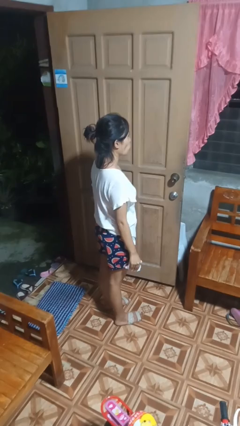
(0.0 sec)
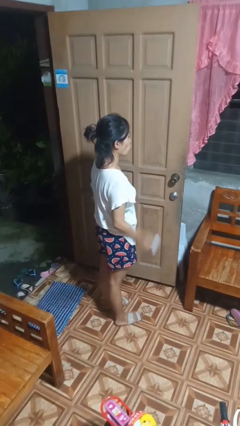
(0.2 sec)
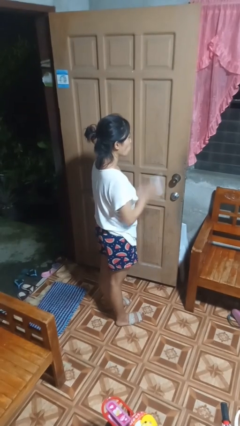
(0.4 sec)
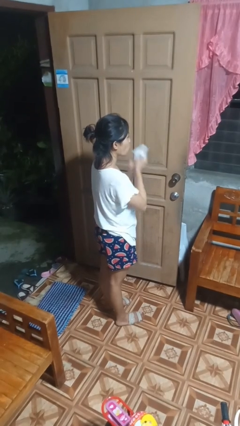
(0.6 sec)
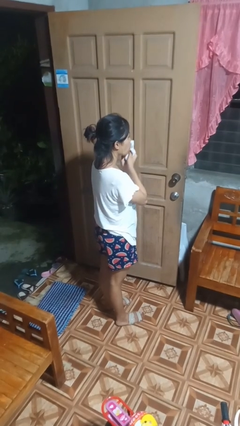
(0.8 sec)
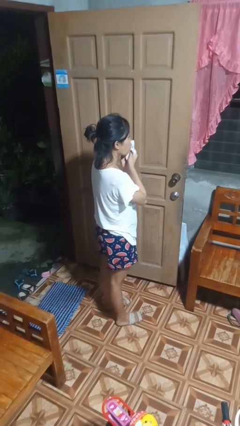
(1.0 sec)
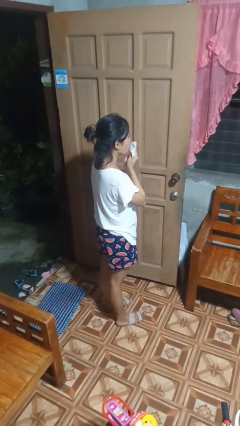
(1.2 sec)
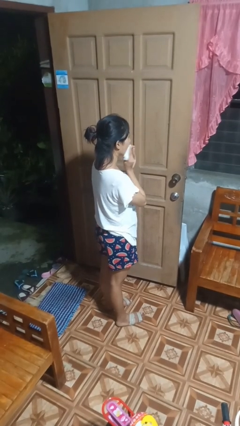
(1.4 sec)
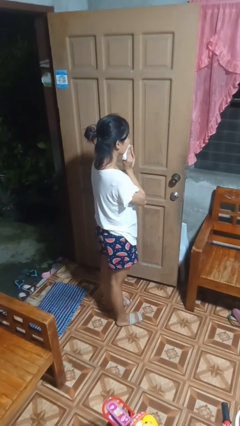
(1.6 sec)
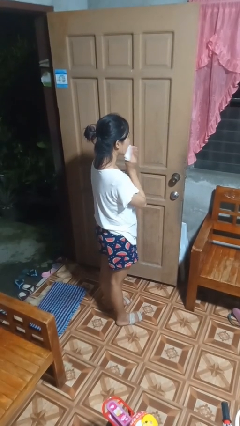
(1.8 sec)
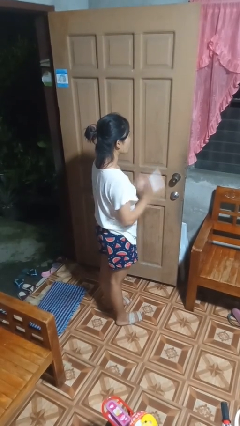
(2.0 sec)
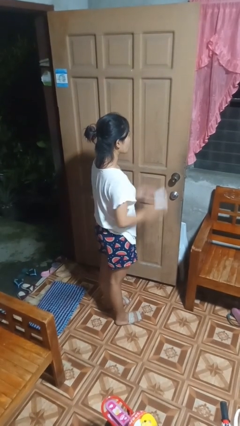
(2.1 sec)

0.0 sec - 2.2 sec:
person wipes mouth with napkin

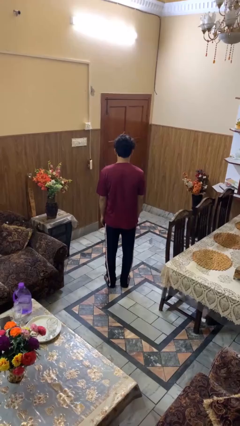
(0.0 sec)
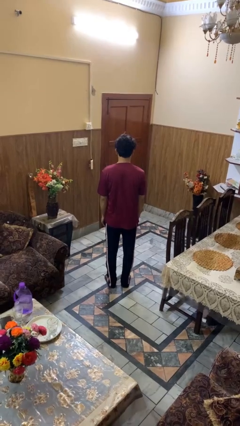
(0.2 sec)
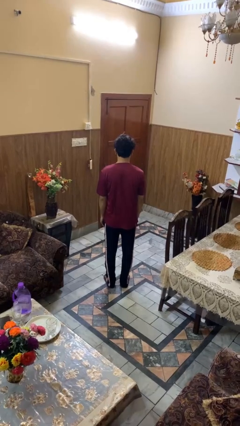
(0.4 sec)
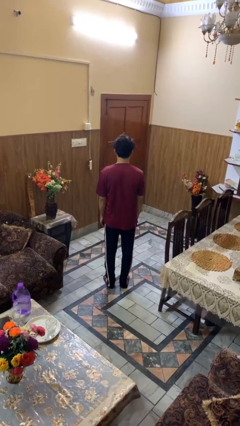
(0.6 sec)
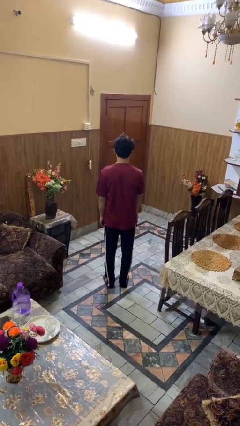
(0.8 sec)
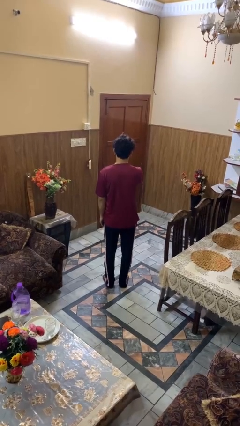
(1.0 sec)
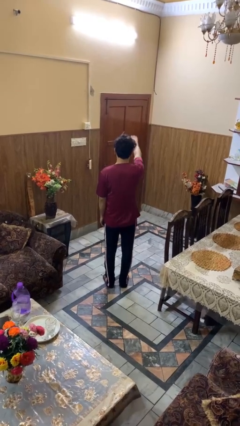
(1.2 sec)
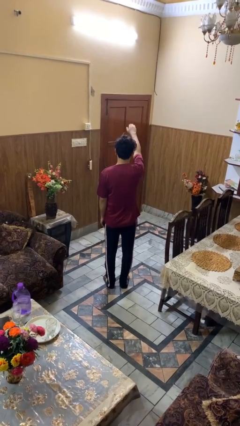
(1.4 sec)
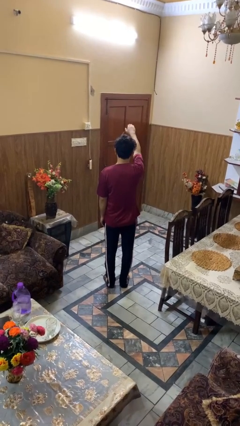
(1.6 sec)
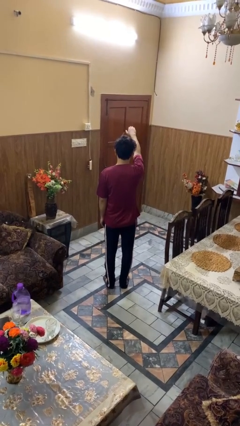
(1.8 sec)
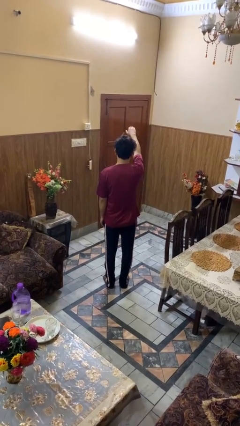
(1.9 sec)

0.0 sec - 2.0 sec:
person gestures swipe up

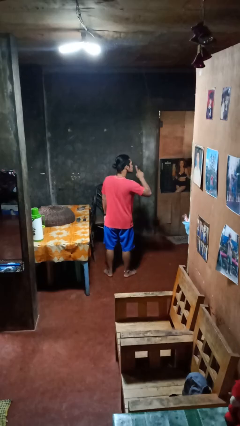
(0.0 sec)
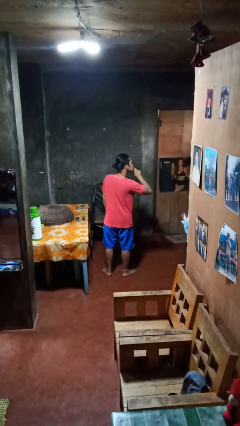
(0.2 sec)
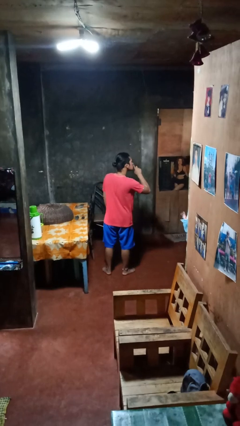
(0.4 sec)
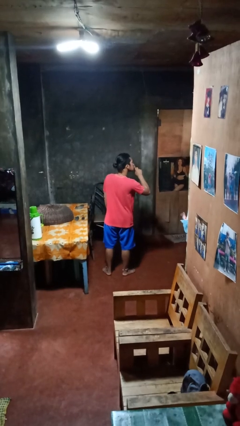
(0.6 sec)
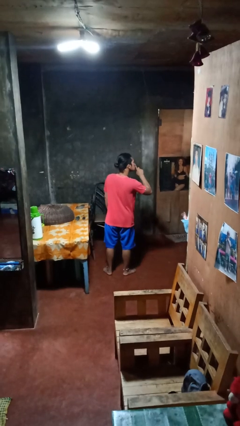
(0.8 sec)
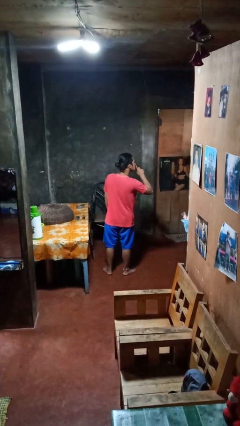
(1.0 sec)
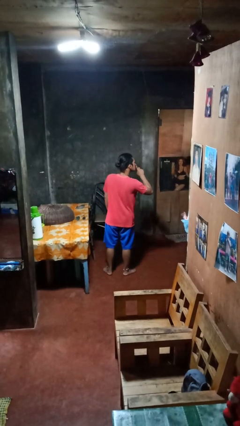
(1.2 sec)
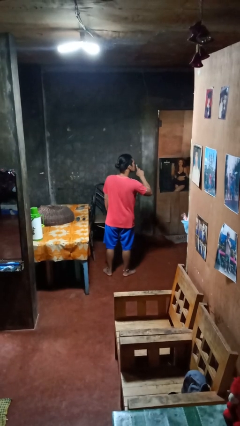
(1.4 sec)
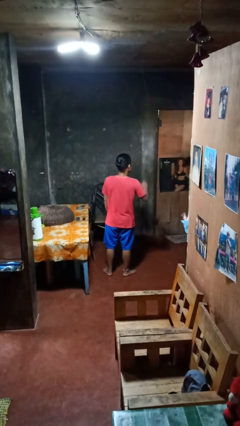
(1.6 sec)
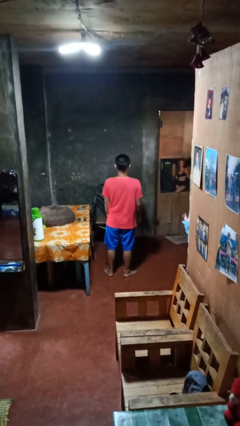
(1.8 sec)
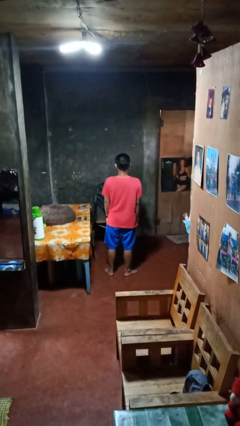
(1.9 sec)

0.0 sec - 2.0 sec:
person gestures be quiet

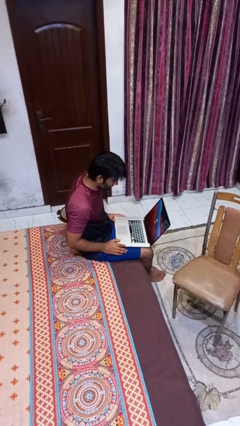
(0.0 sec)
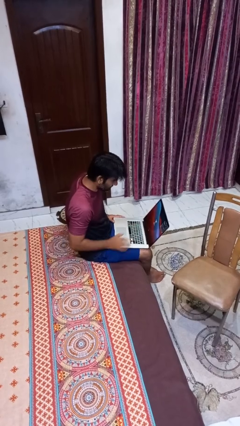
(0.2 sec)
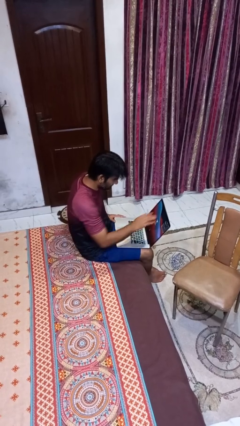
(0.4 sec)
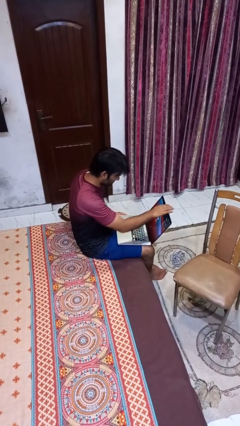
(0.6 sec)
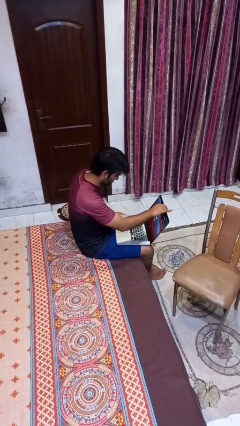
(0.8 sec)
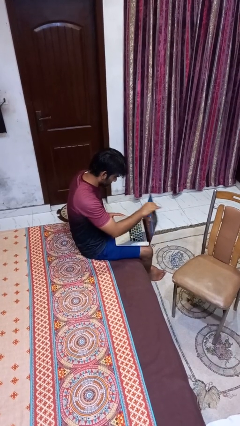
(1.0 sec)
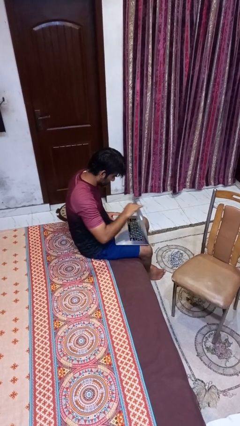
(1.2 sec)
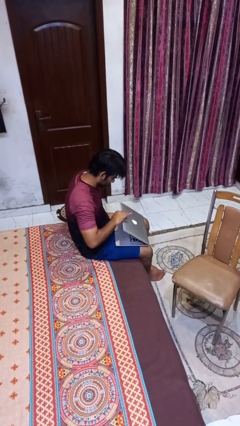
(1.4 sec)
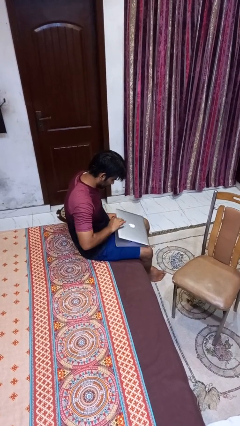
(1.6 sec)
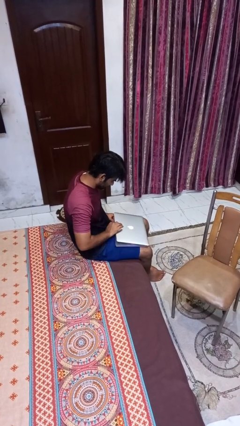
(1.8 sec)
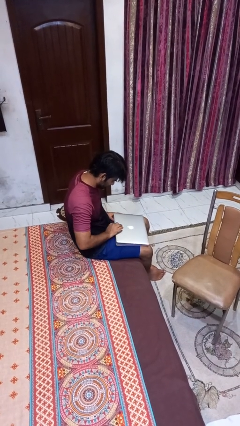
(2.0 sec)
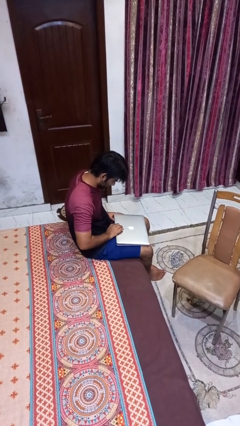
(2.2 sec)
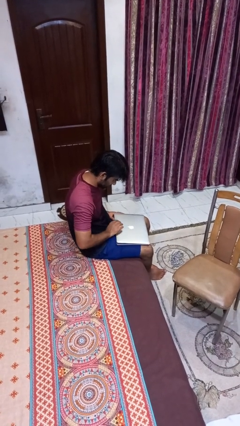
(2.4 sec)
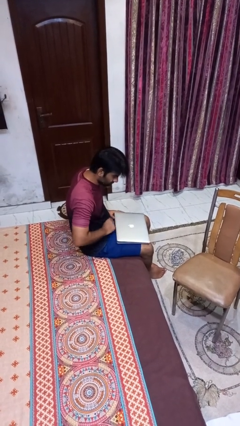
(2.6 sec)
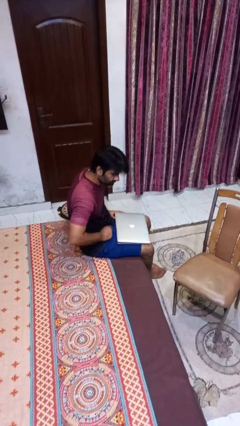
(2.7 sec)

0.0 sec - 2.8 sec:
person closes laptop

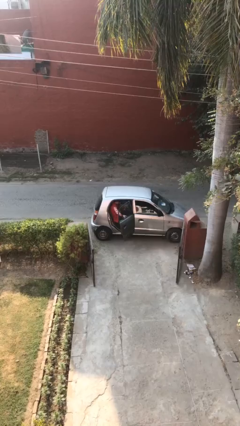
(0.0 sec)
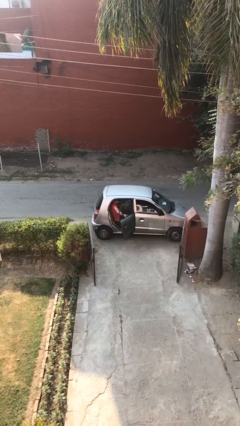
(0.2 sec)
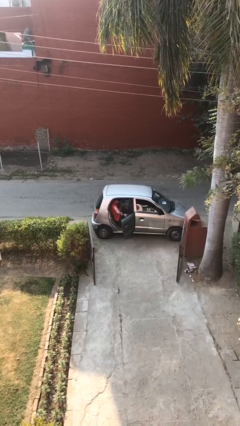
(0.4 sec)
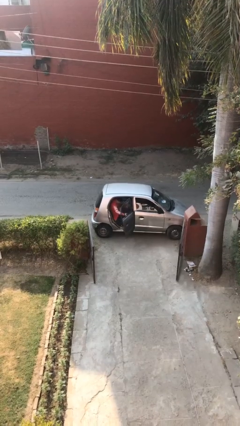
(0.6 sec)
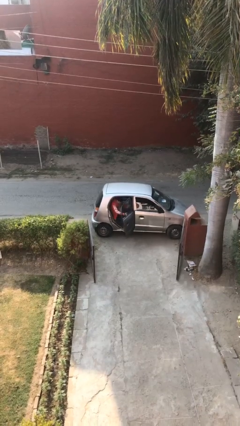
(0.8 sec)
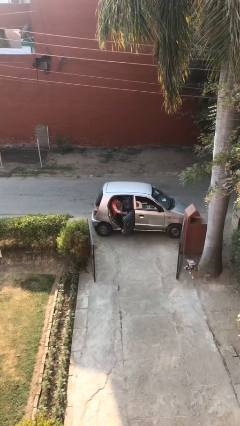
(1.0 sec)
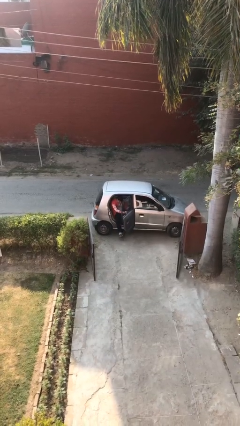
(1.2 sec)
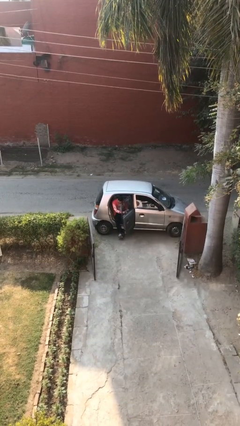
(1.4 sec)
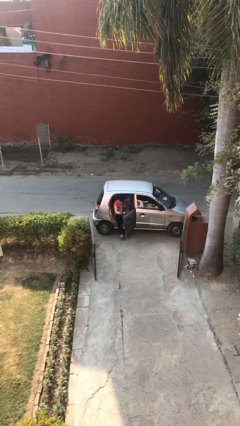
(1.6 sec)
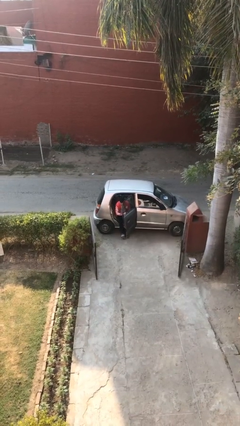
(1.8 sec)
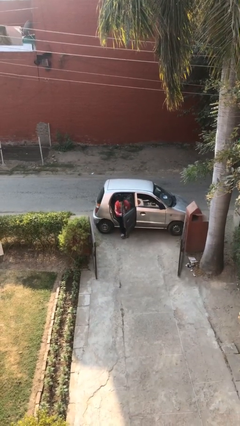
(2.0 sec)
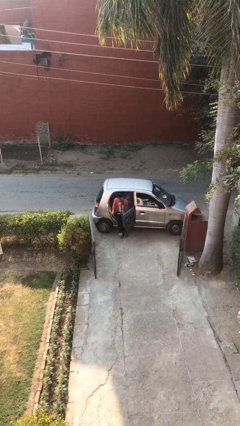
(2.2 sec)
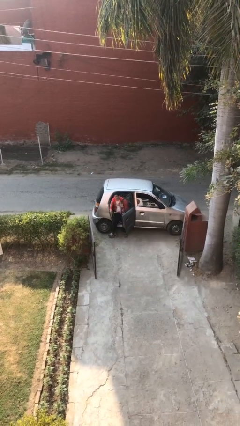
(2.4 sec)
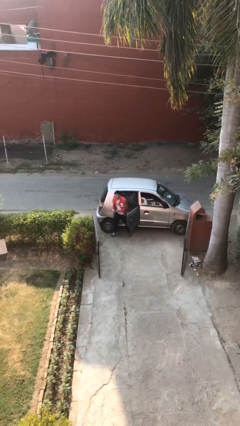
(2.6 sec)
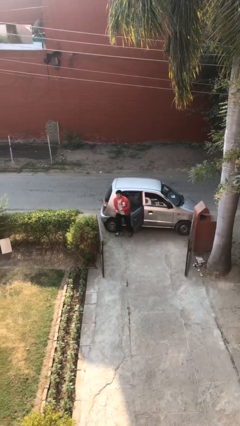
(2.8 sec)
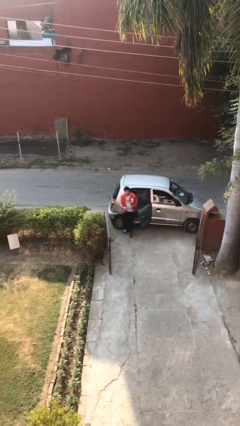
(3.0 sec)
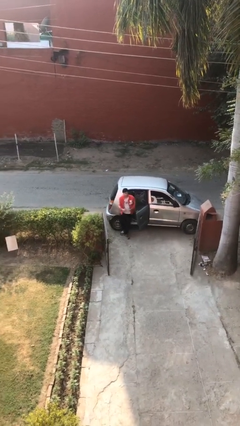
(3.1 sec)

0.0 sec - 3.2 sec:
person exits car

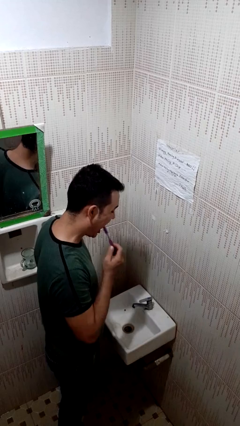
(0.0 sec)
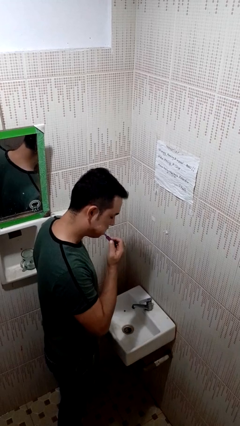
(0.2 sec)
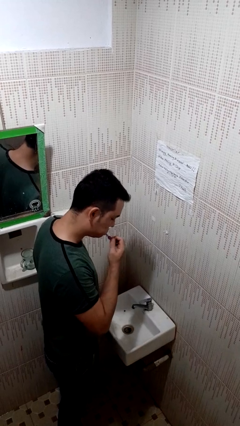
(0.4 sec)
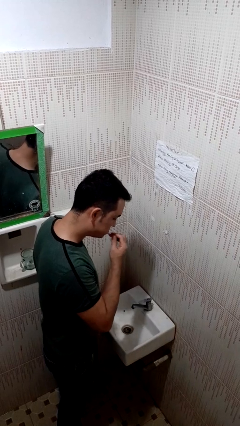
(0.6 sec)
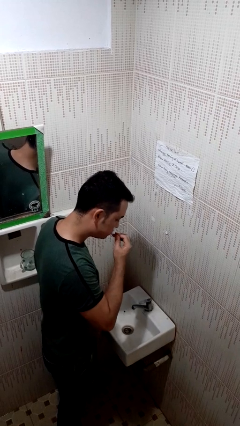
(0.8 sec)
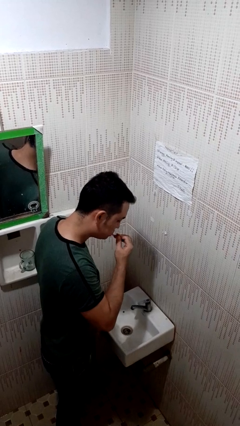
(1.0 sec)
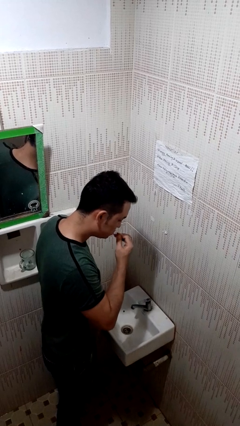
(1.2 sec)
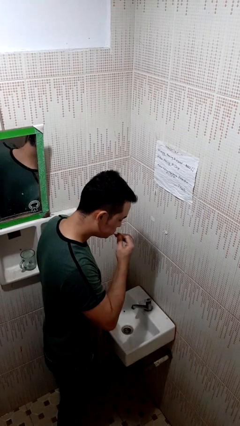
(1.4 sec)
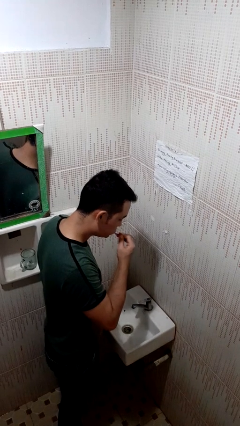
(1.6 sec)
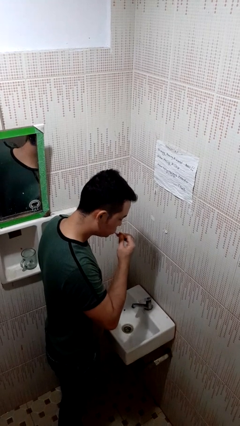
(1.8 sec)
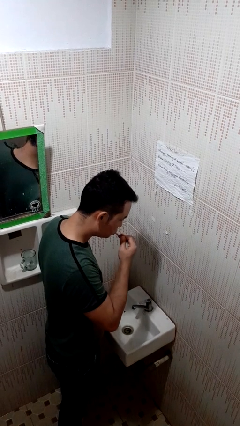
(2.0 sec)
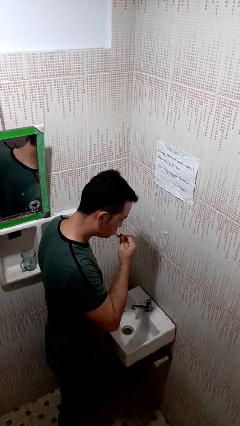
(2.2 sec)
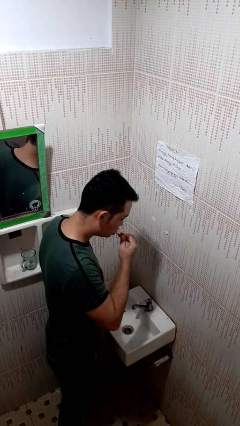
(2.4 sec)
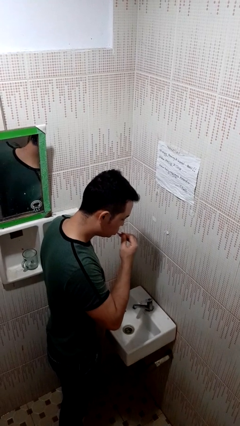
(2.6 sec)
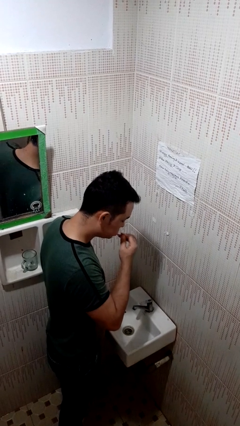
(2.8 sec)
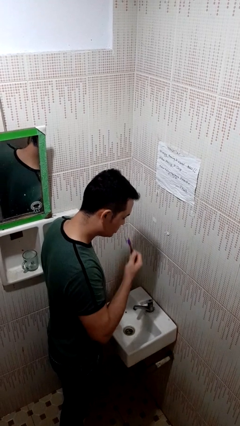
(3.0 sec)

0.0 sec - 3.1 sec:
person brushes teeth

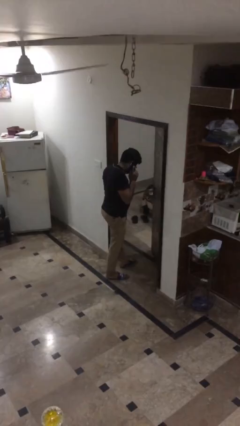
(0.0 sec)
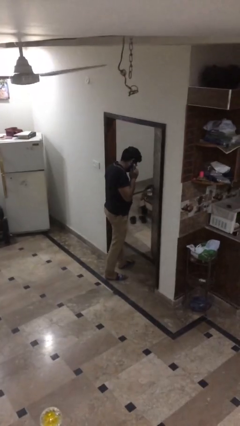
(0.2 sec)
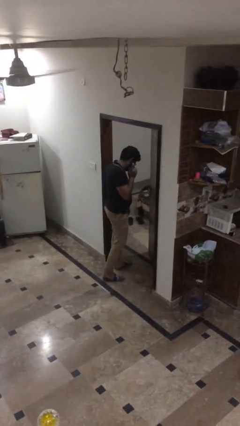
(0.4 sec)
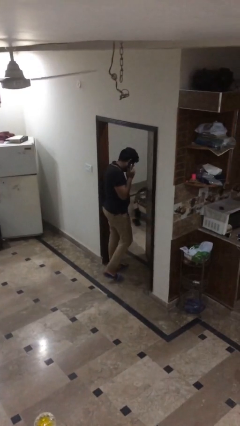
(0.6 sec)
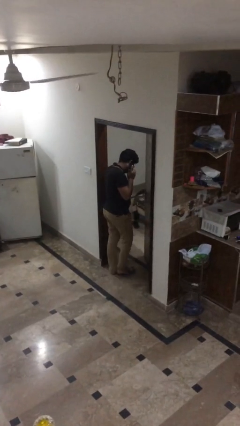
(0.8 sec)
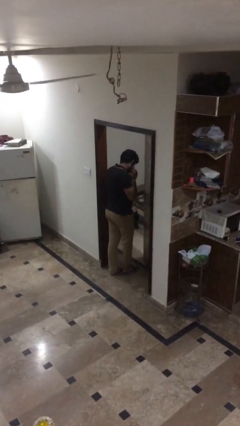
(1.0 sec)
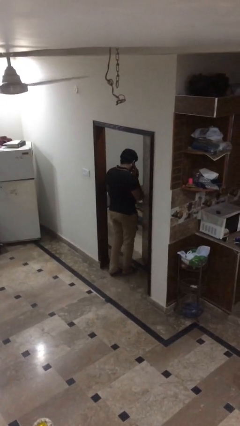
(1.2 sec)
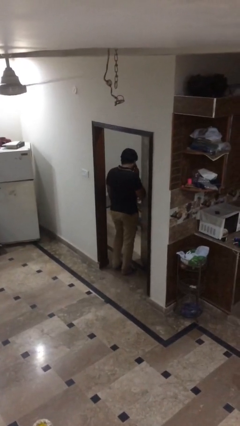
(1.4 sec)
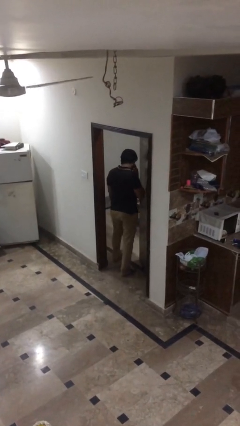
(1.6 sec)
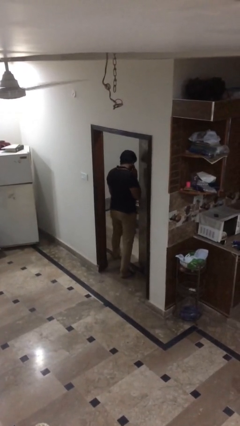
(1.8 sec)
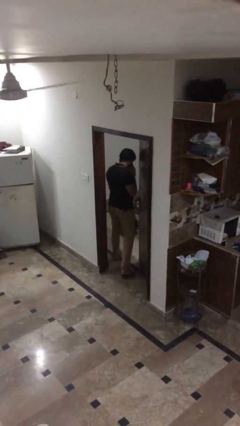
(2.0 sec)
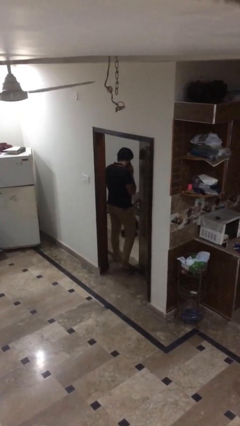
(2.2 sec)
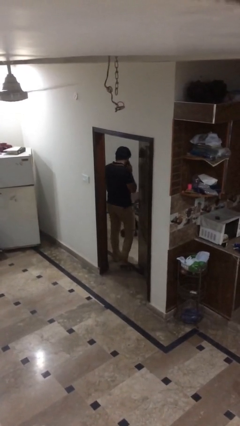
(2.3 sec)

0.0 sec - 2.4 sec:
person exits scene through structure
